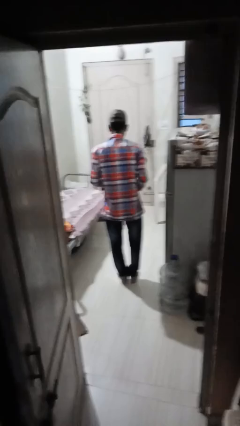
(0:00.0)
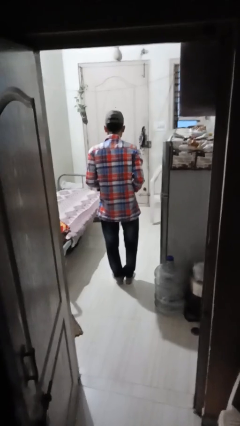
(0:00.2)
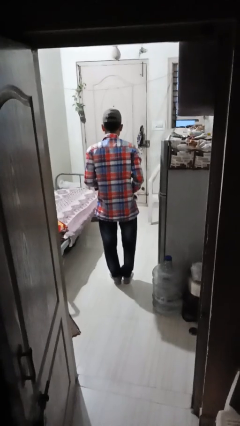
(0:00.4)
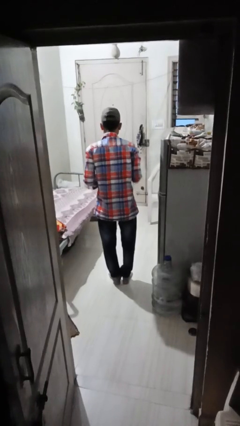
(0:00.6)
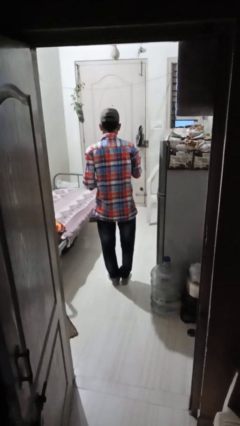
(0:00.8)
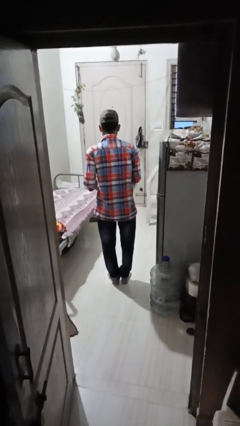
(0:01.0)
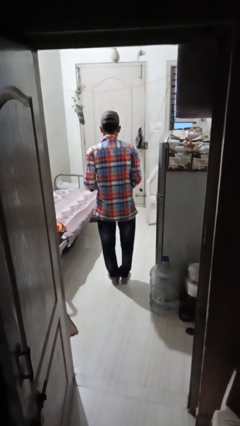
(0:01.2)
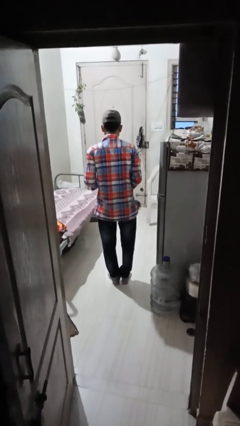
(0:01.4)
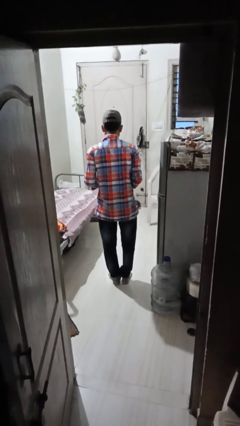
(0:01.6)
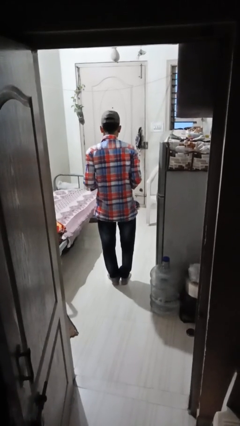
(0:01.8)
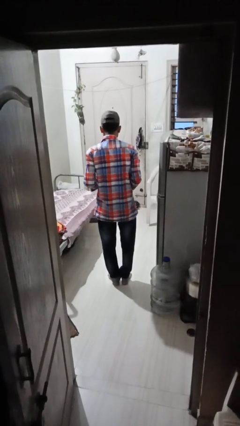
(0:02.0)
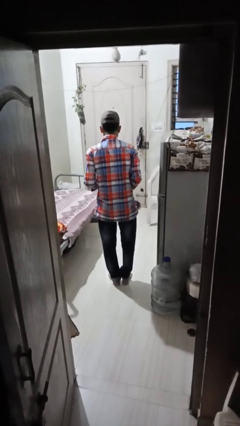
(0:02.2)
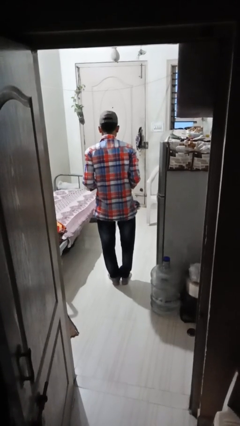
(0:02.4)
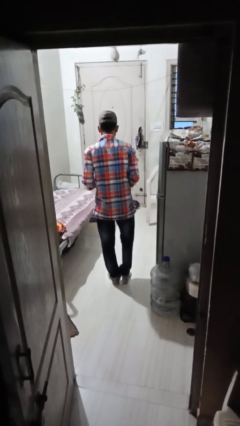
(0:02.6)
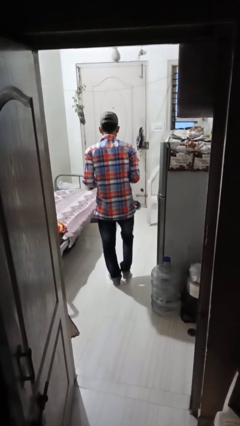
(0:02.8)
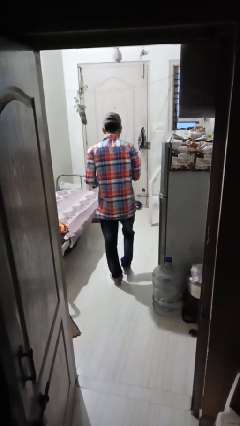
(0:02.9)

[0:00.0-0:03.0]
person throws object to ground

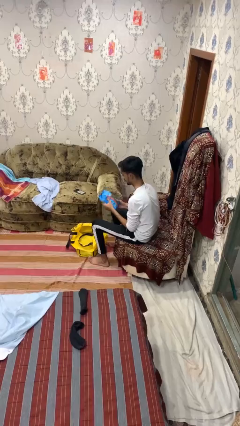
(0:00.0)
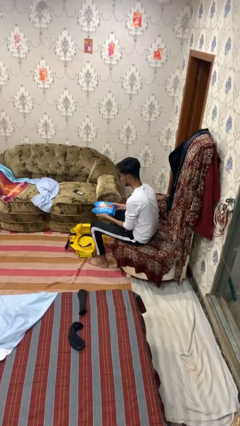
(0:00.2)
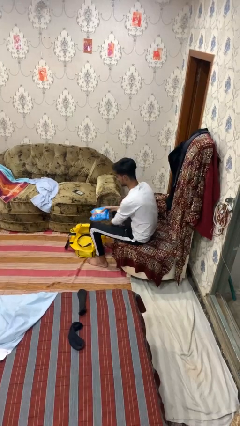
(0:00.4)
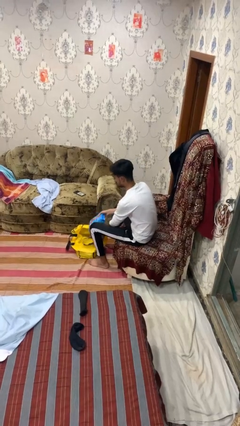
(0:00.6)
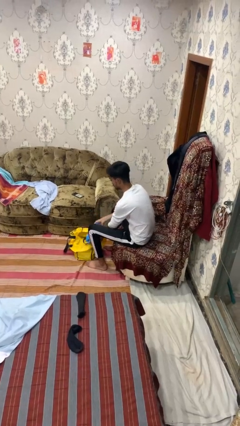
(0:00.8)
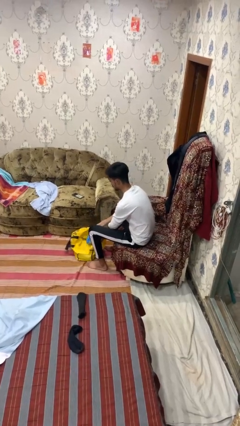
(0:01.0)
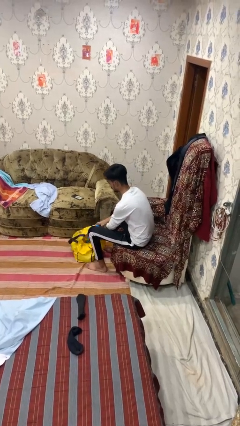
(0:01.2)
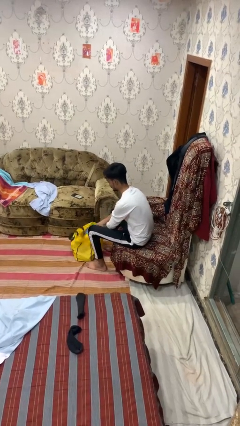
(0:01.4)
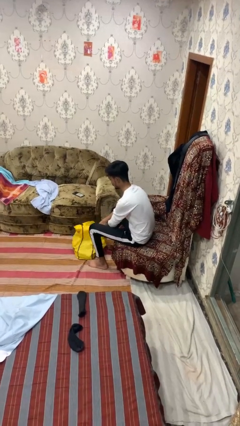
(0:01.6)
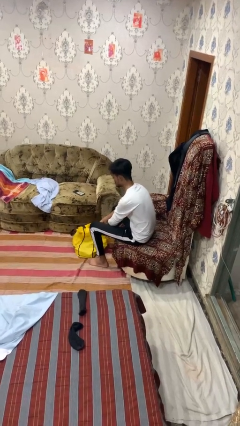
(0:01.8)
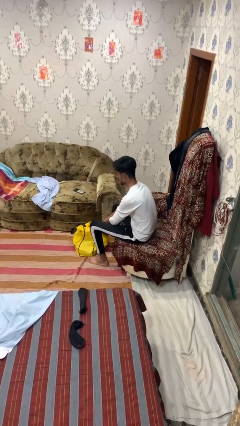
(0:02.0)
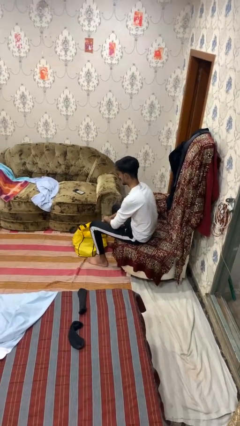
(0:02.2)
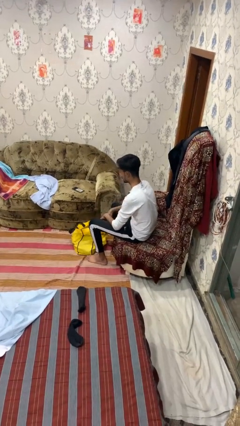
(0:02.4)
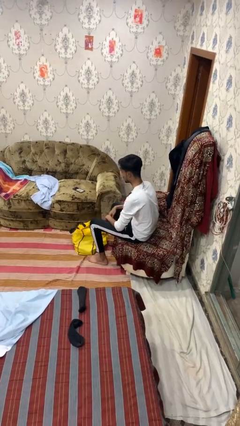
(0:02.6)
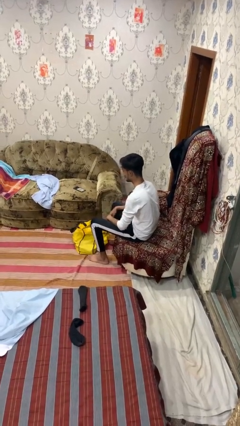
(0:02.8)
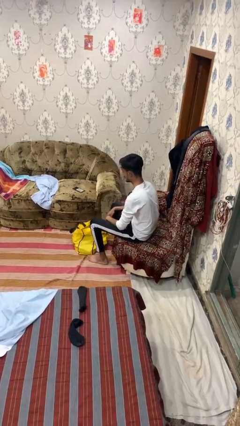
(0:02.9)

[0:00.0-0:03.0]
person puts object into bag

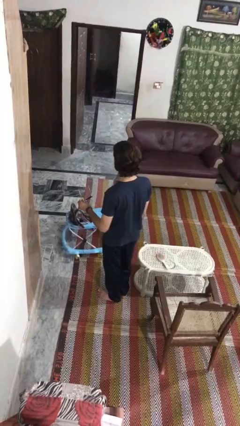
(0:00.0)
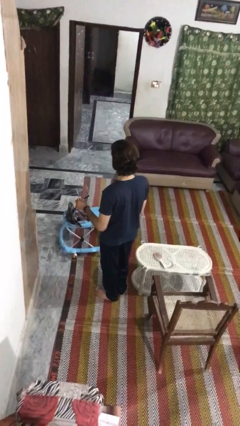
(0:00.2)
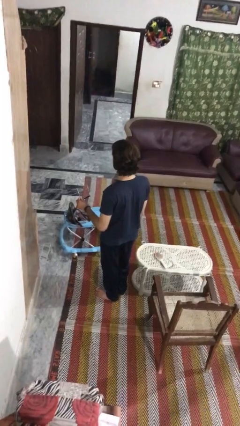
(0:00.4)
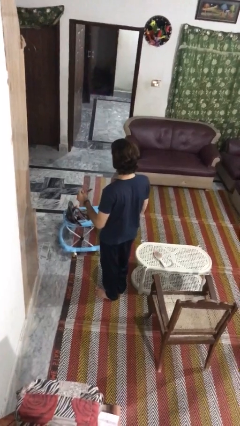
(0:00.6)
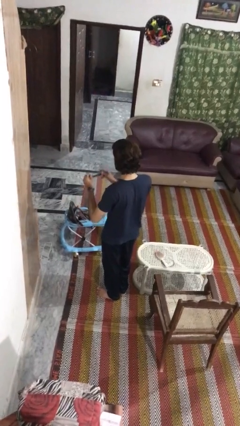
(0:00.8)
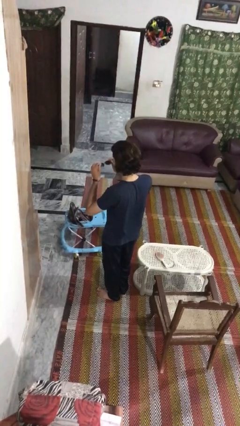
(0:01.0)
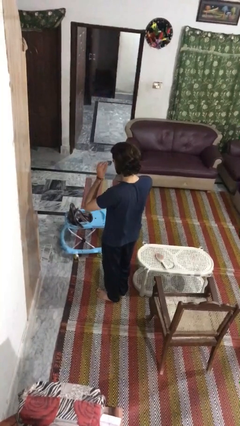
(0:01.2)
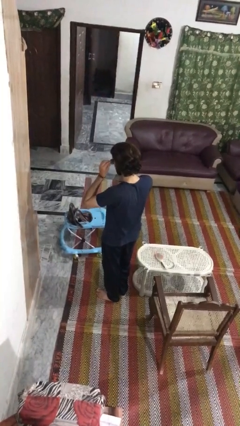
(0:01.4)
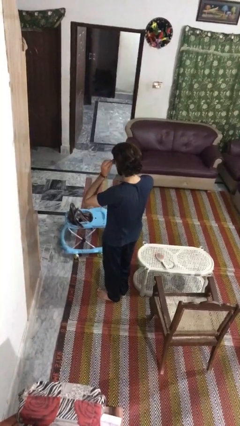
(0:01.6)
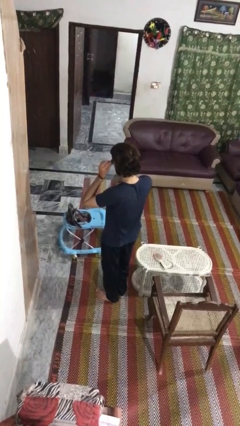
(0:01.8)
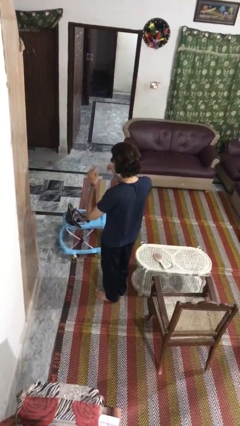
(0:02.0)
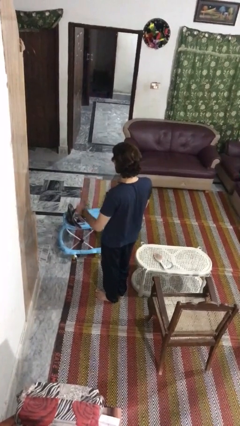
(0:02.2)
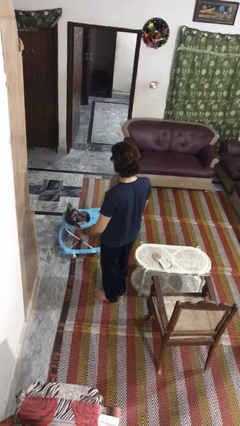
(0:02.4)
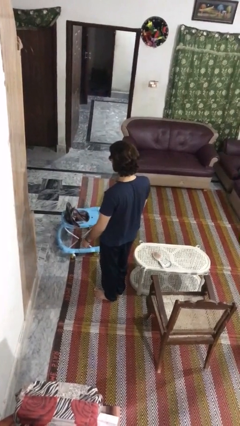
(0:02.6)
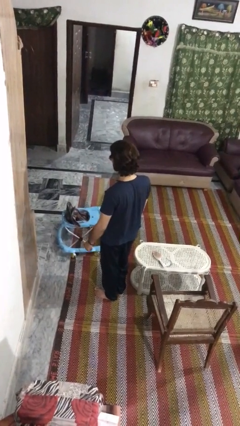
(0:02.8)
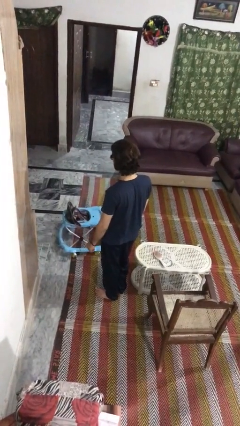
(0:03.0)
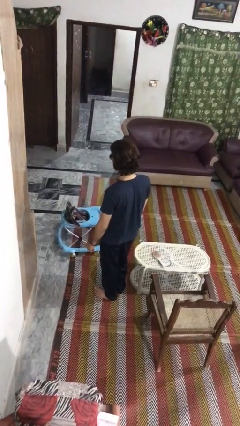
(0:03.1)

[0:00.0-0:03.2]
person puts on sunglasses

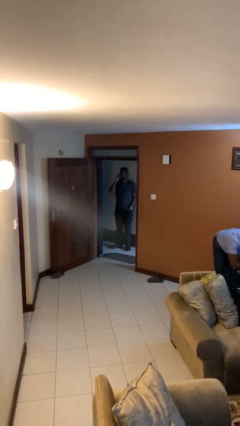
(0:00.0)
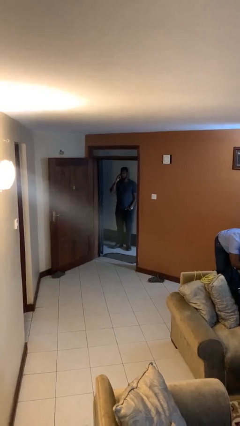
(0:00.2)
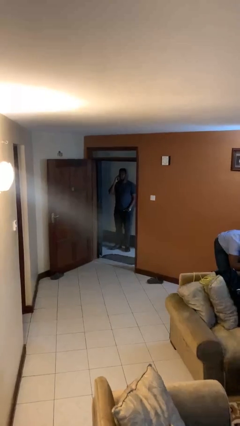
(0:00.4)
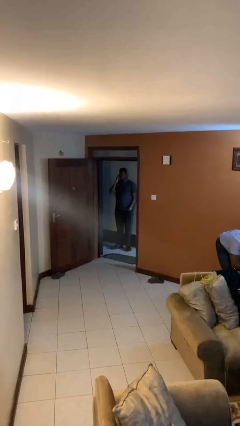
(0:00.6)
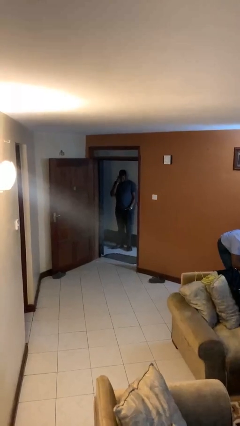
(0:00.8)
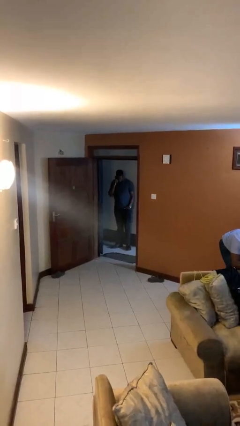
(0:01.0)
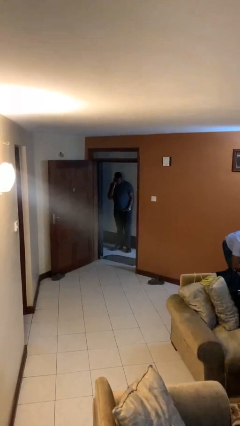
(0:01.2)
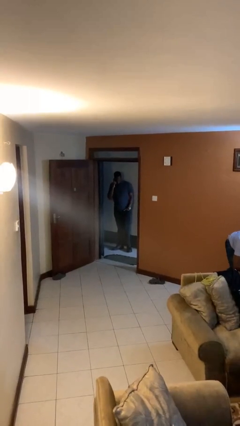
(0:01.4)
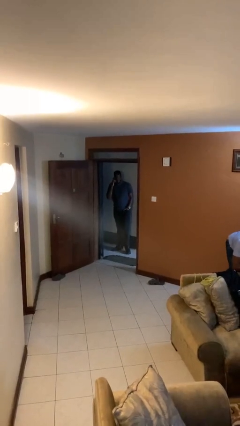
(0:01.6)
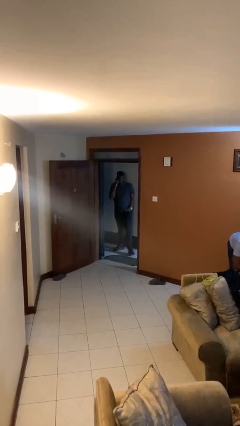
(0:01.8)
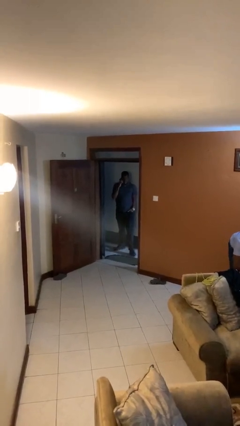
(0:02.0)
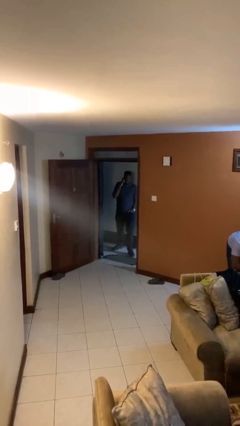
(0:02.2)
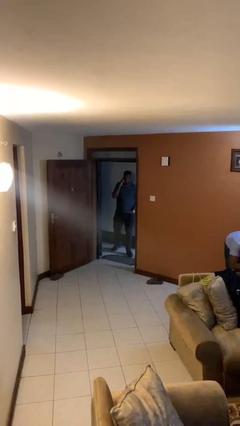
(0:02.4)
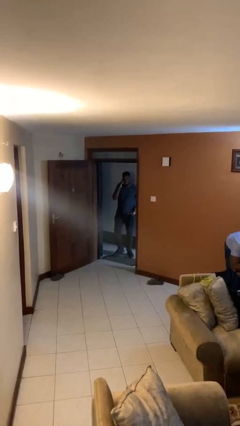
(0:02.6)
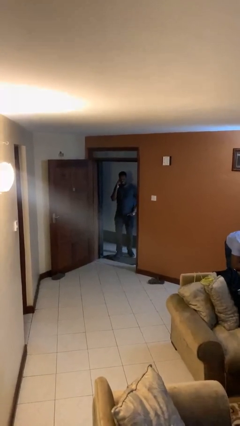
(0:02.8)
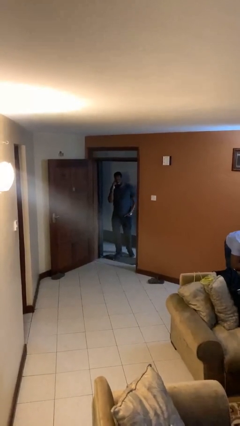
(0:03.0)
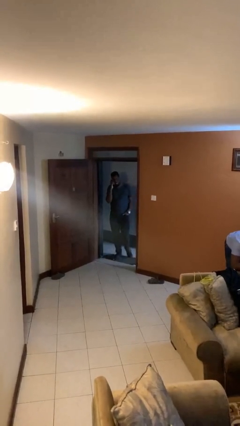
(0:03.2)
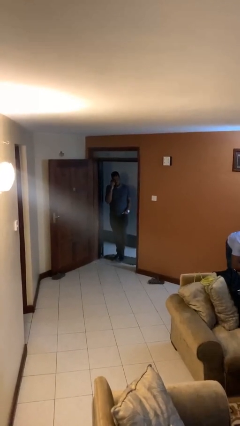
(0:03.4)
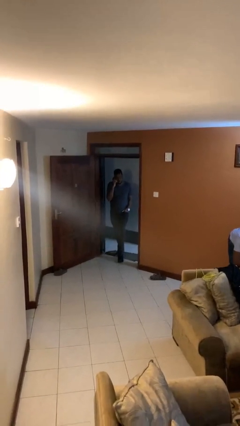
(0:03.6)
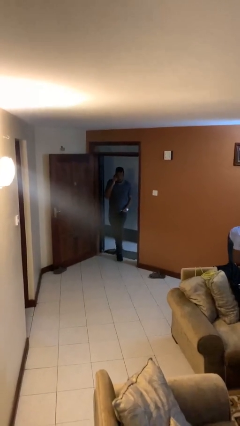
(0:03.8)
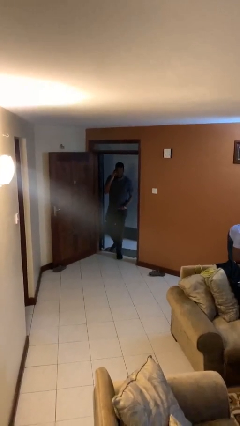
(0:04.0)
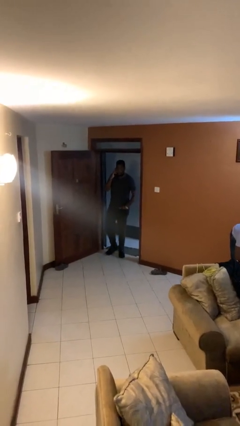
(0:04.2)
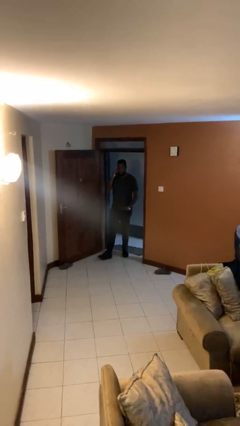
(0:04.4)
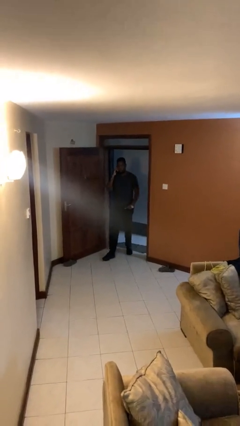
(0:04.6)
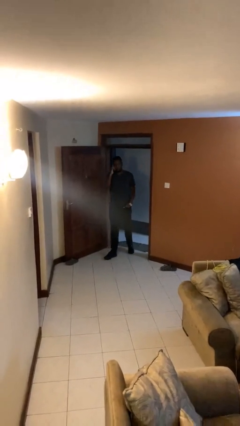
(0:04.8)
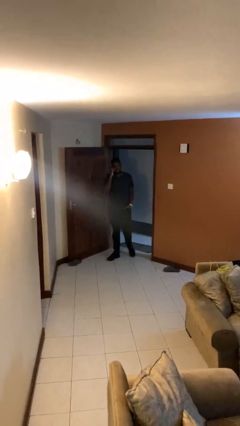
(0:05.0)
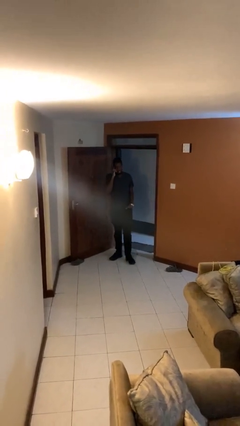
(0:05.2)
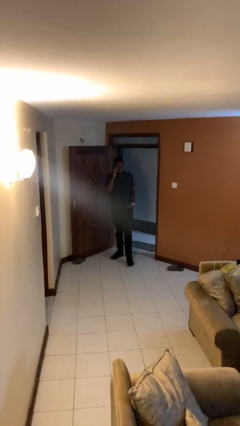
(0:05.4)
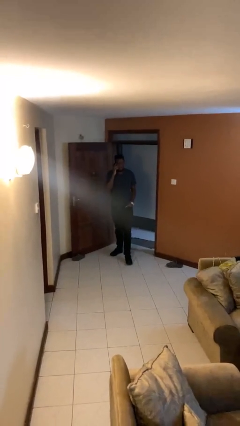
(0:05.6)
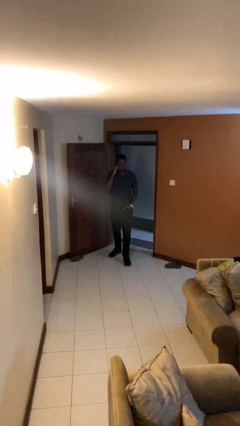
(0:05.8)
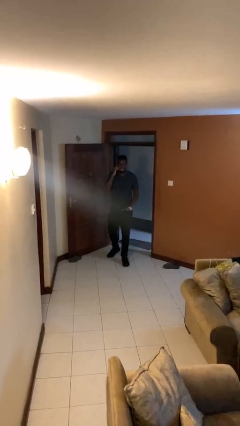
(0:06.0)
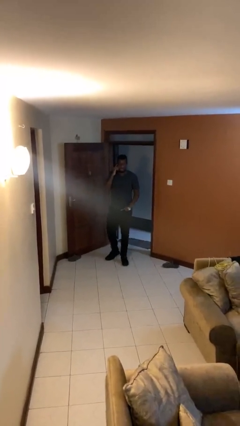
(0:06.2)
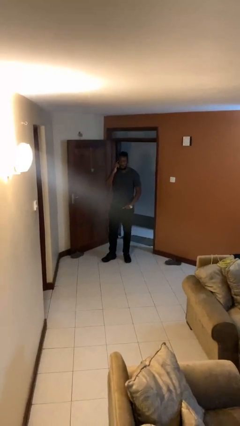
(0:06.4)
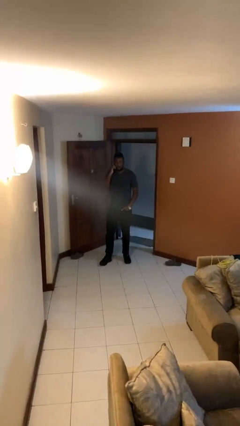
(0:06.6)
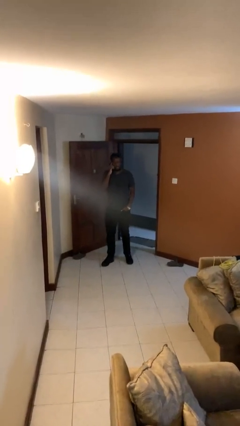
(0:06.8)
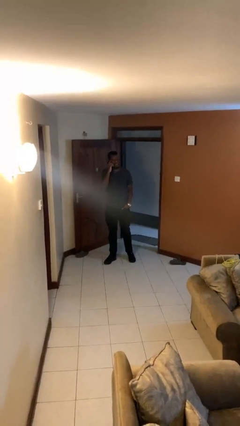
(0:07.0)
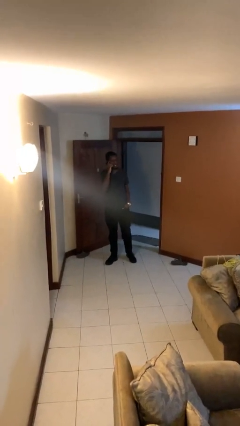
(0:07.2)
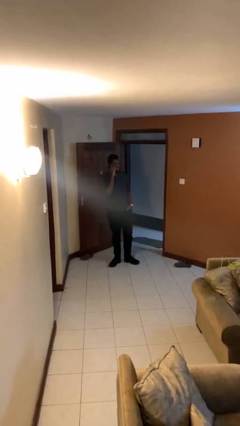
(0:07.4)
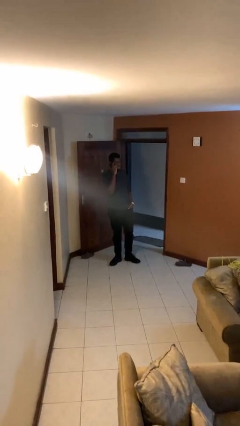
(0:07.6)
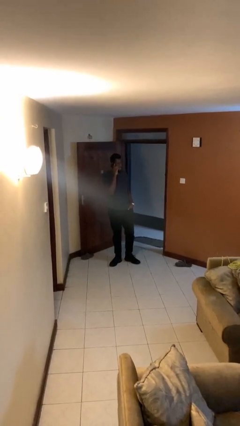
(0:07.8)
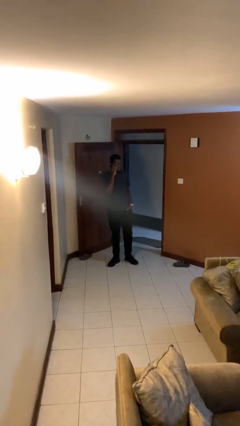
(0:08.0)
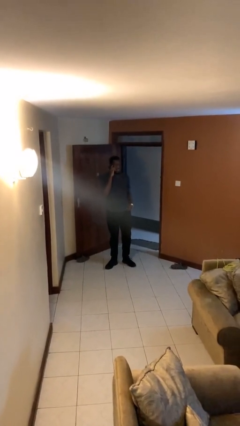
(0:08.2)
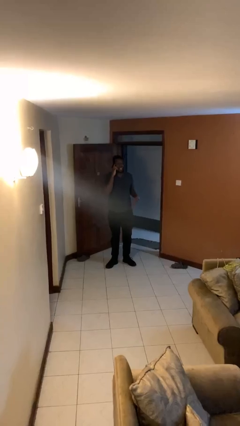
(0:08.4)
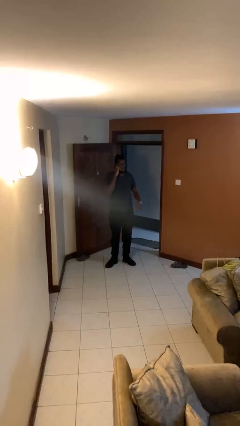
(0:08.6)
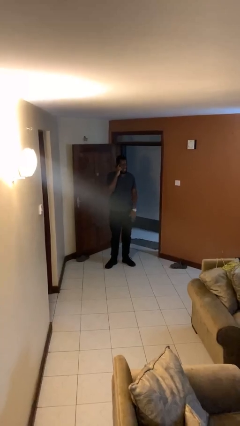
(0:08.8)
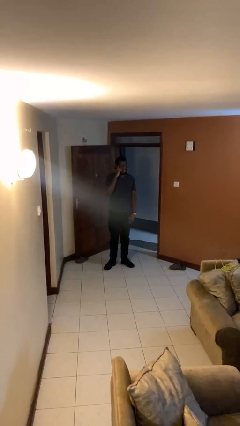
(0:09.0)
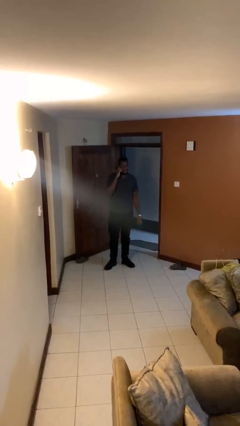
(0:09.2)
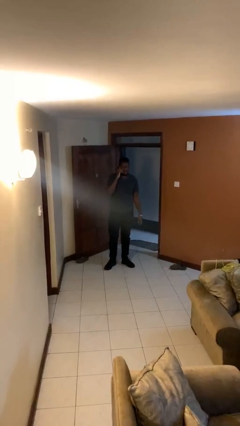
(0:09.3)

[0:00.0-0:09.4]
person enters scene through structure
